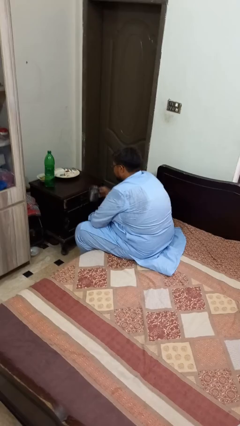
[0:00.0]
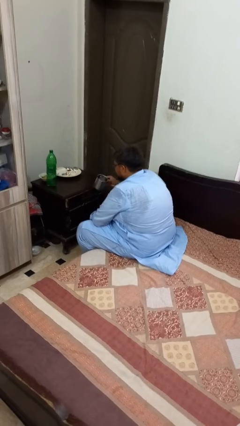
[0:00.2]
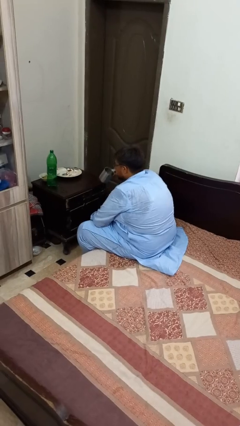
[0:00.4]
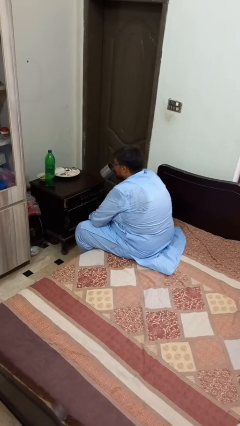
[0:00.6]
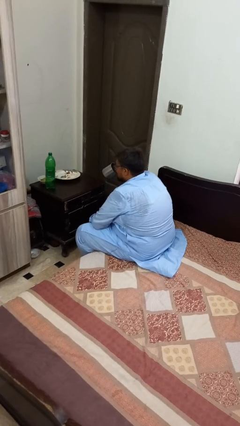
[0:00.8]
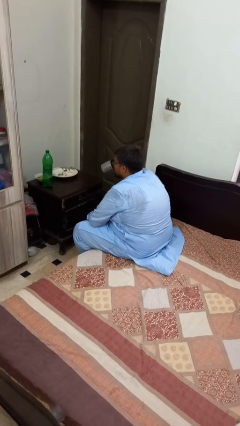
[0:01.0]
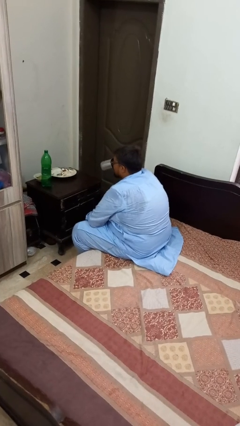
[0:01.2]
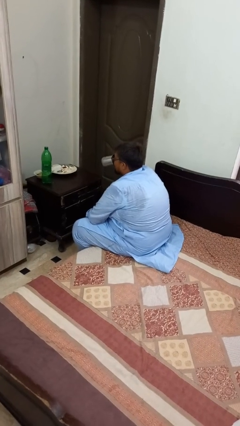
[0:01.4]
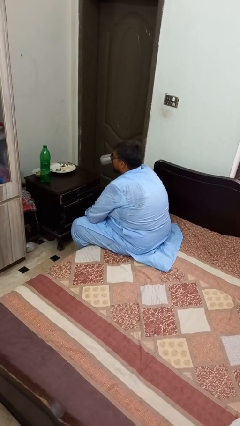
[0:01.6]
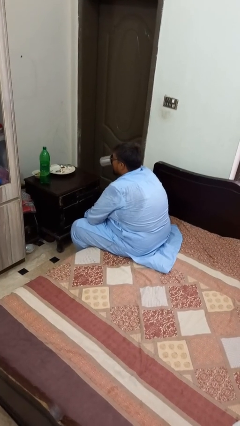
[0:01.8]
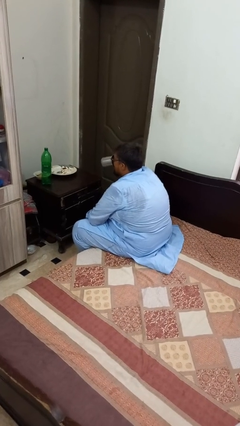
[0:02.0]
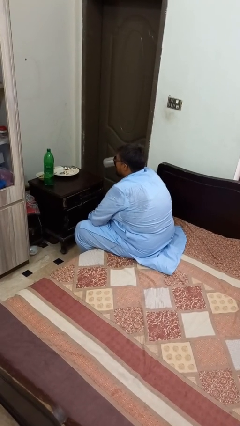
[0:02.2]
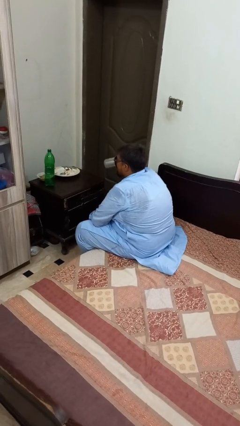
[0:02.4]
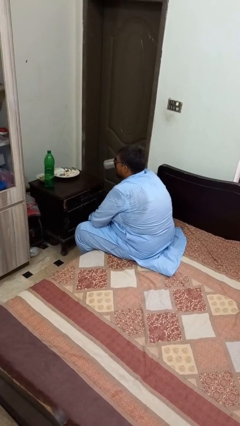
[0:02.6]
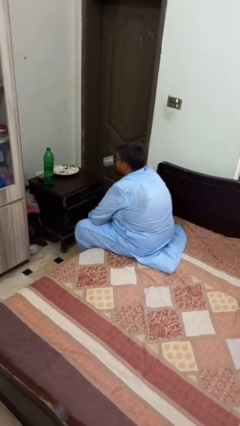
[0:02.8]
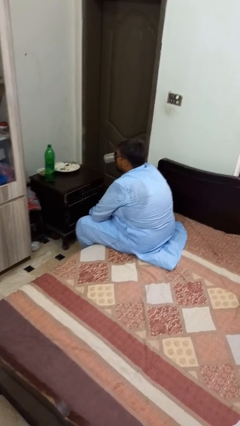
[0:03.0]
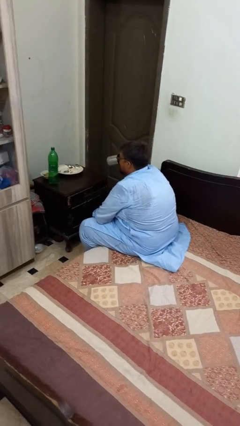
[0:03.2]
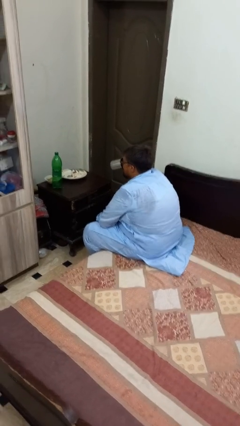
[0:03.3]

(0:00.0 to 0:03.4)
person drinks from mug

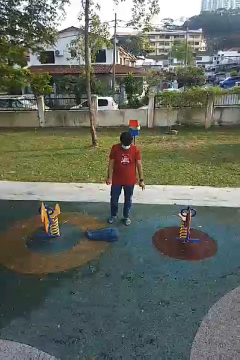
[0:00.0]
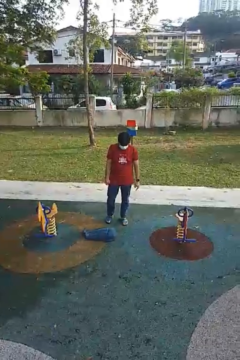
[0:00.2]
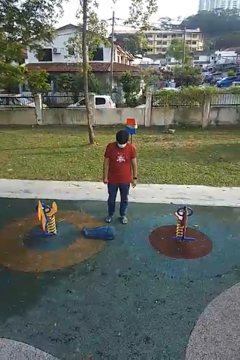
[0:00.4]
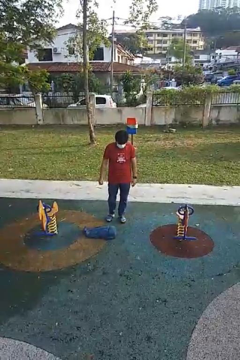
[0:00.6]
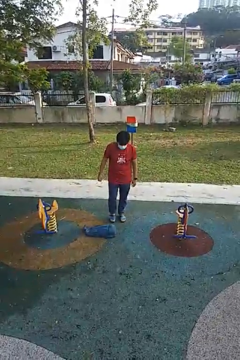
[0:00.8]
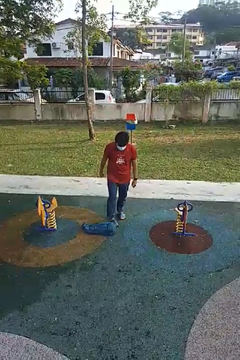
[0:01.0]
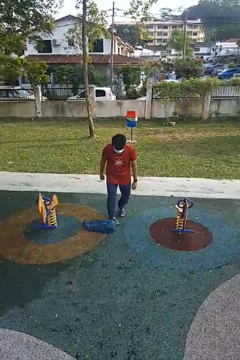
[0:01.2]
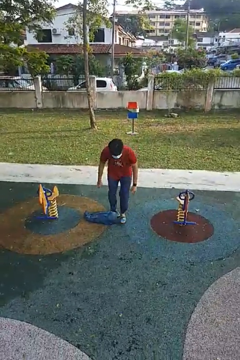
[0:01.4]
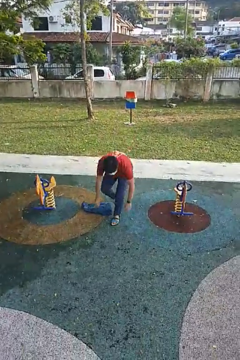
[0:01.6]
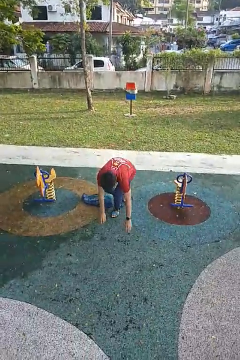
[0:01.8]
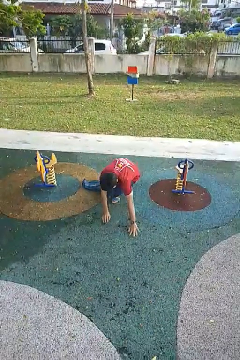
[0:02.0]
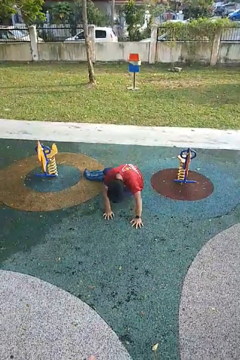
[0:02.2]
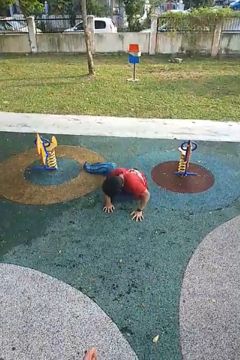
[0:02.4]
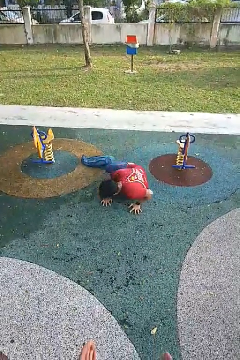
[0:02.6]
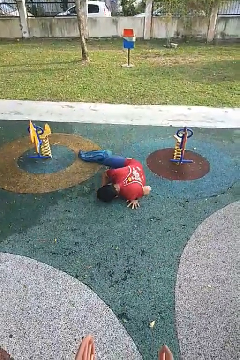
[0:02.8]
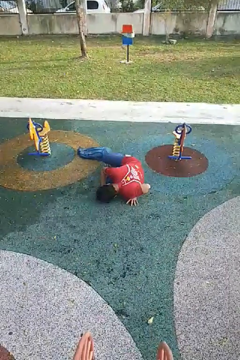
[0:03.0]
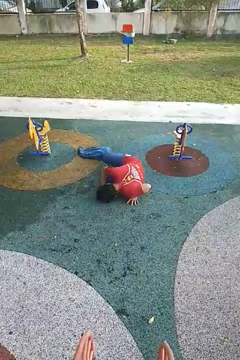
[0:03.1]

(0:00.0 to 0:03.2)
person trips on object on floor

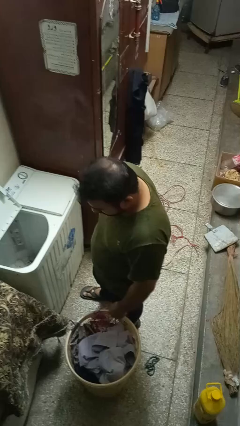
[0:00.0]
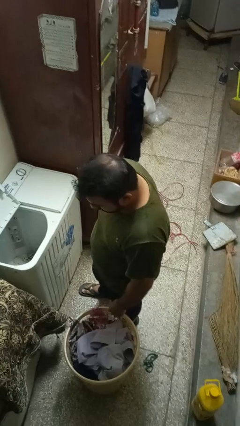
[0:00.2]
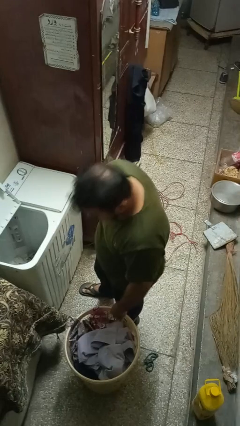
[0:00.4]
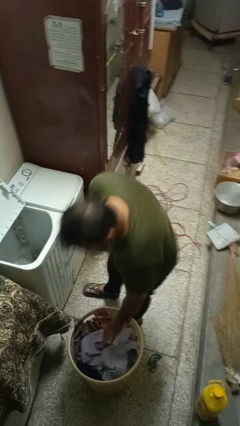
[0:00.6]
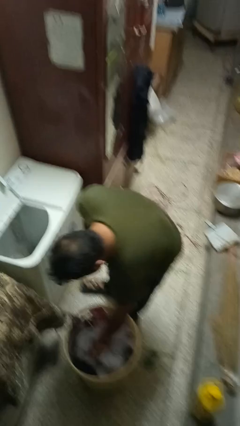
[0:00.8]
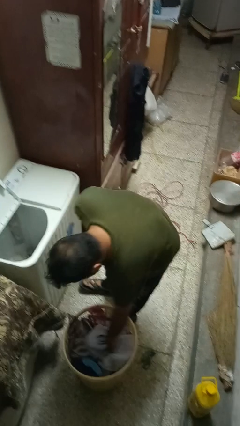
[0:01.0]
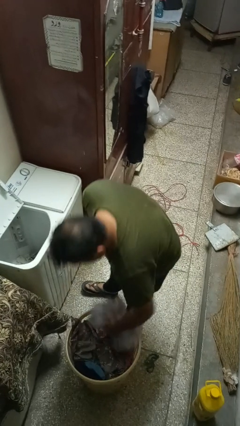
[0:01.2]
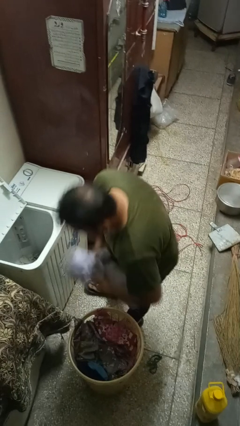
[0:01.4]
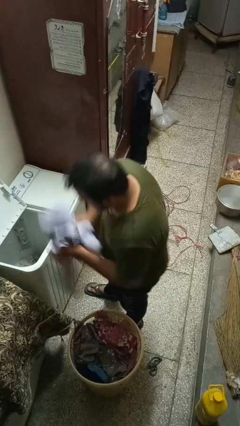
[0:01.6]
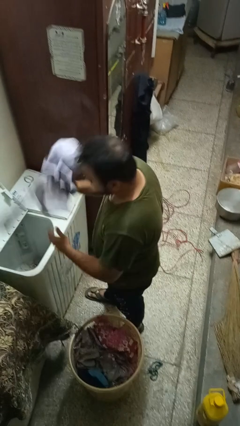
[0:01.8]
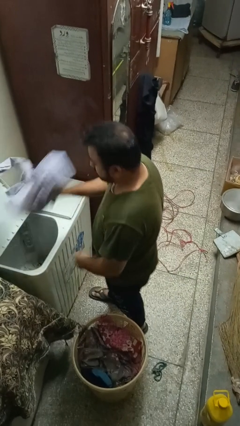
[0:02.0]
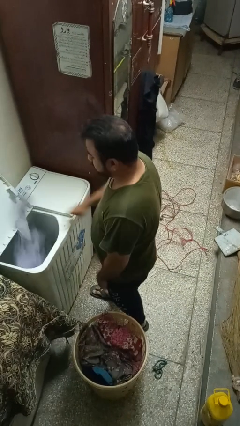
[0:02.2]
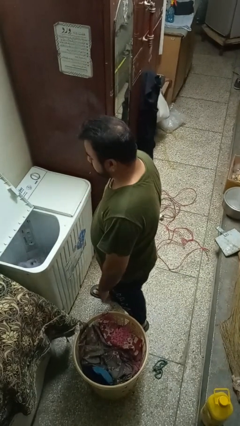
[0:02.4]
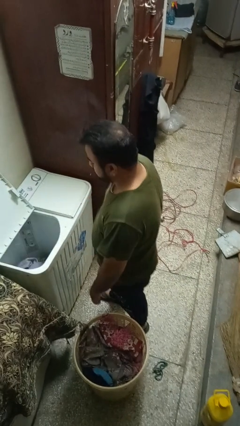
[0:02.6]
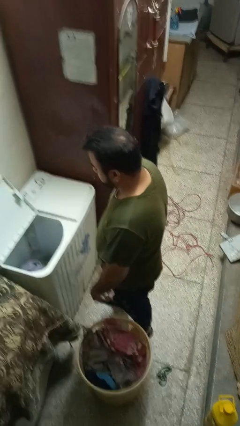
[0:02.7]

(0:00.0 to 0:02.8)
person loads clotheswasher

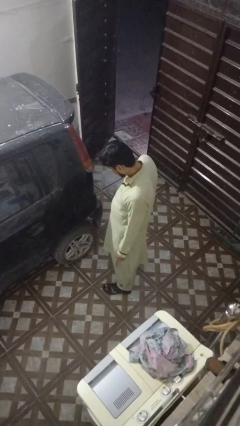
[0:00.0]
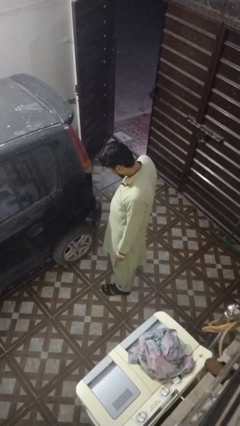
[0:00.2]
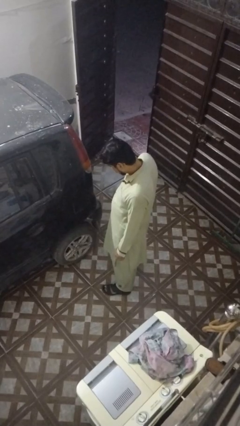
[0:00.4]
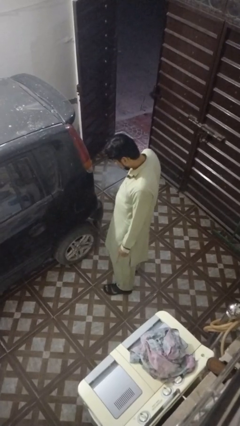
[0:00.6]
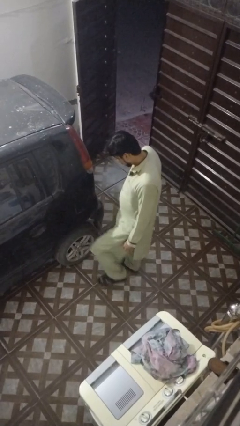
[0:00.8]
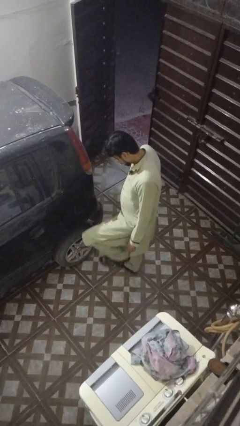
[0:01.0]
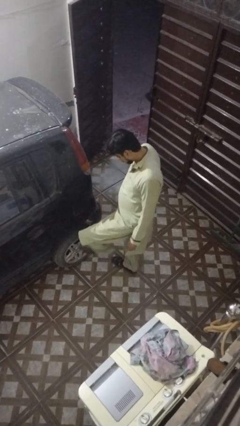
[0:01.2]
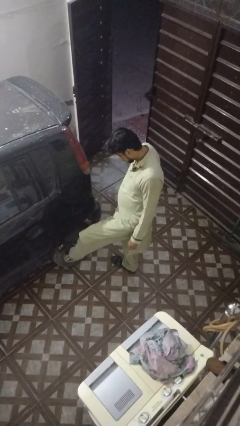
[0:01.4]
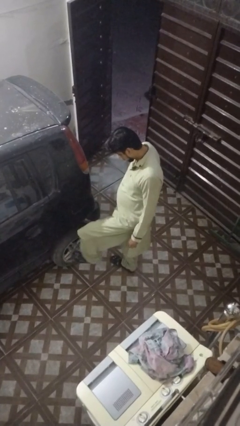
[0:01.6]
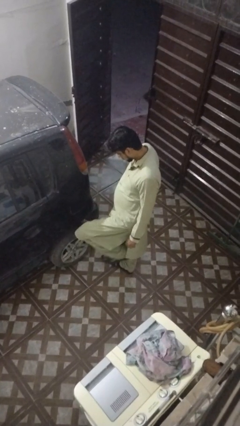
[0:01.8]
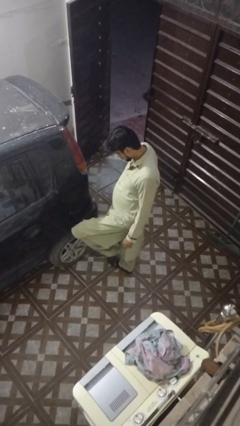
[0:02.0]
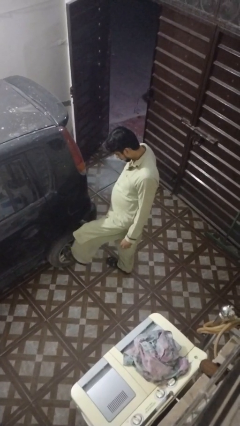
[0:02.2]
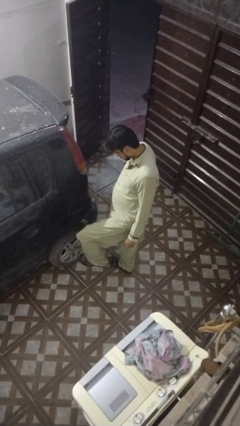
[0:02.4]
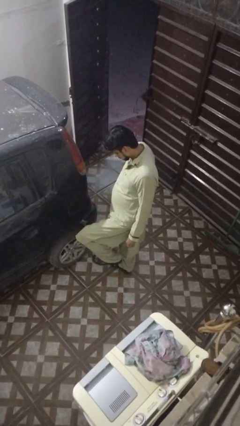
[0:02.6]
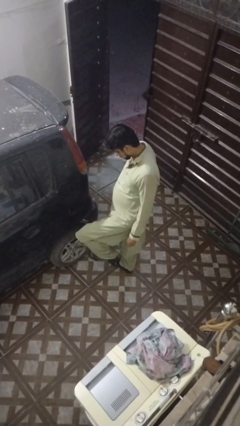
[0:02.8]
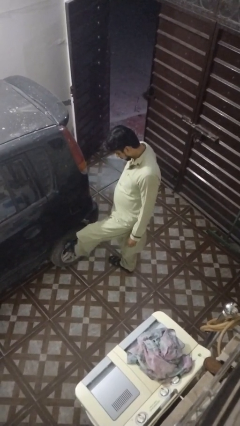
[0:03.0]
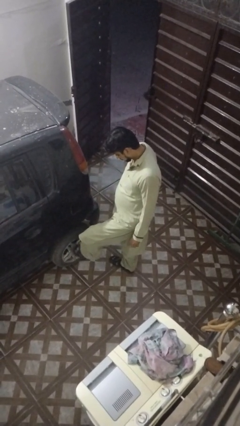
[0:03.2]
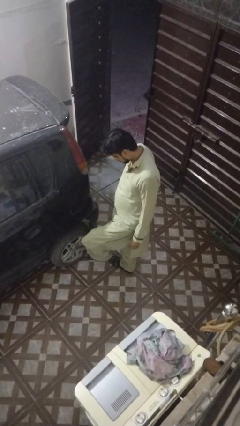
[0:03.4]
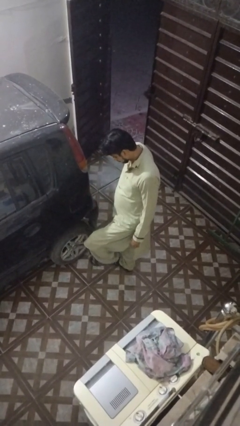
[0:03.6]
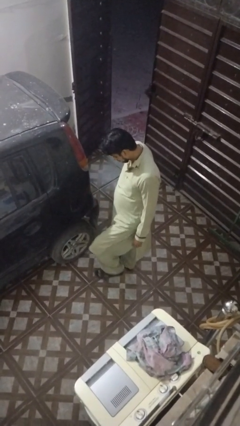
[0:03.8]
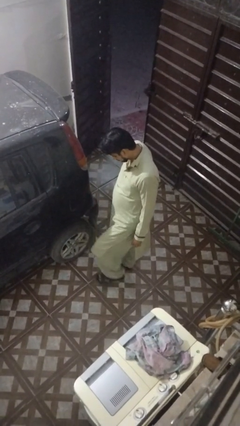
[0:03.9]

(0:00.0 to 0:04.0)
person kicks car tires

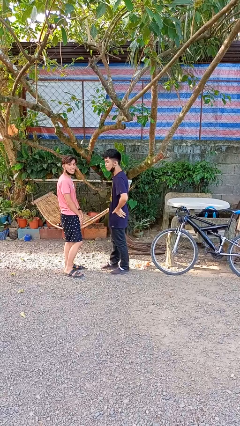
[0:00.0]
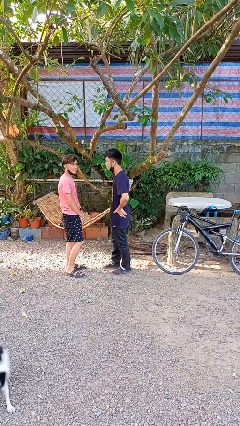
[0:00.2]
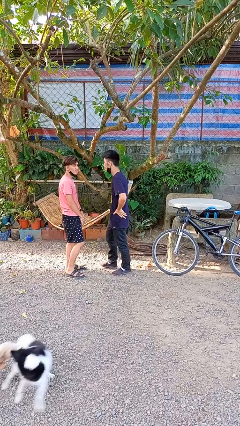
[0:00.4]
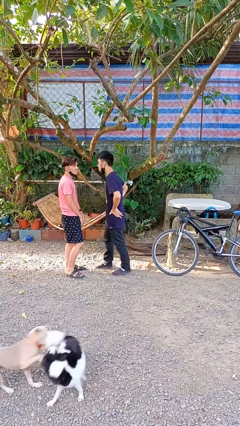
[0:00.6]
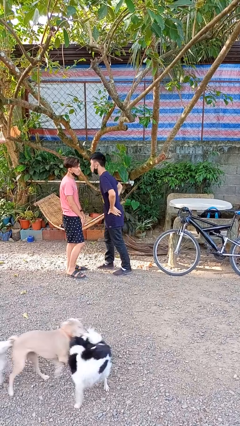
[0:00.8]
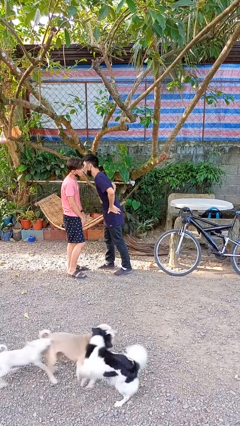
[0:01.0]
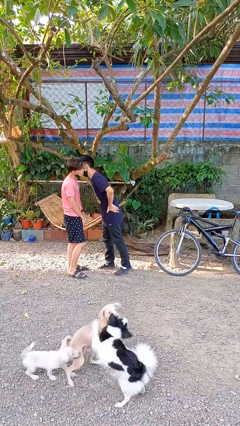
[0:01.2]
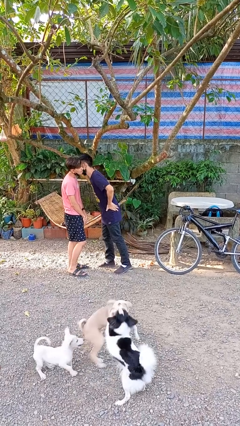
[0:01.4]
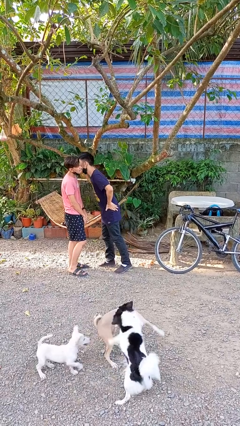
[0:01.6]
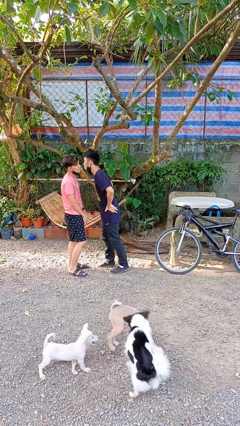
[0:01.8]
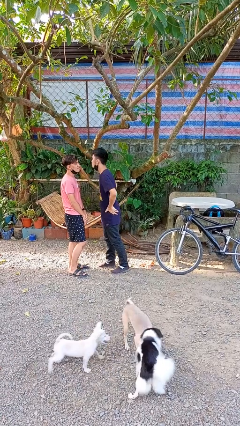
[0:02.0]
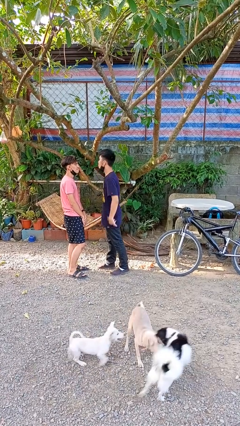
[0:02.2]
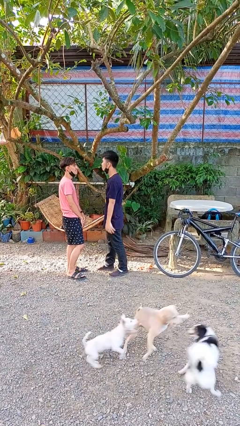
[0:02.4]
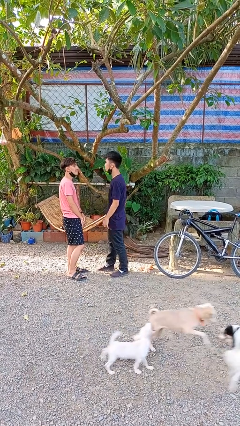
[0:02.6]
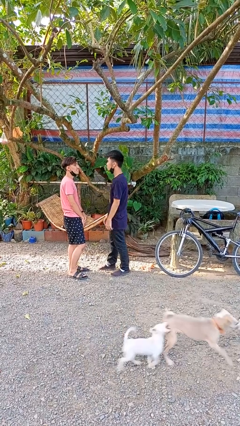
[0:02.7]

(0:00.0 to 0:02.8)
person kisses cheek of person

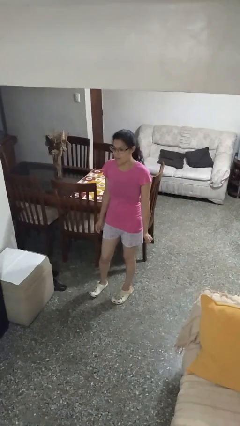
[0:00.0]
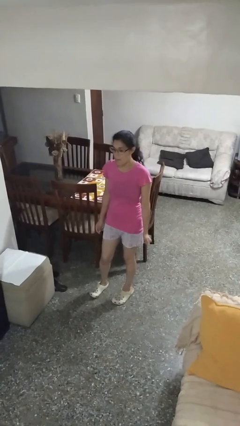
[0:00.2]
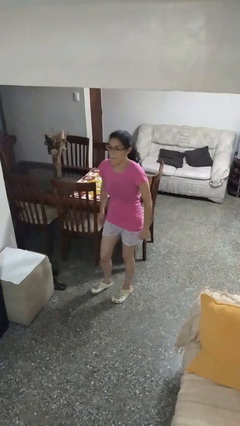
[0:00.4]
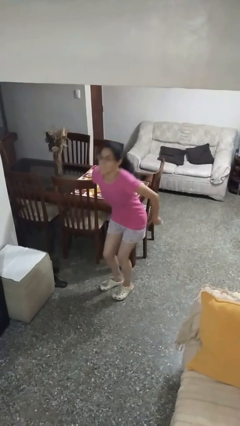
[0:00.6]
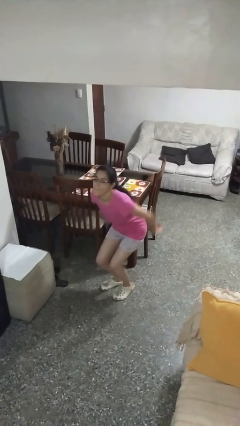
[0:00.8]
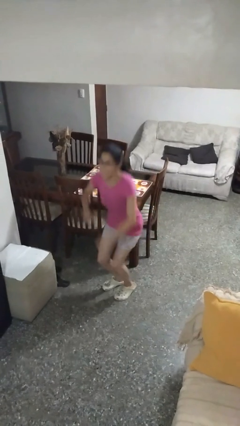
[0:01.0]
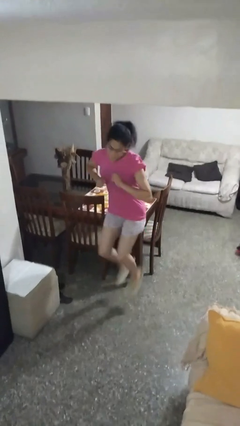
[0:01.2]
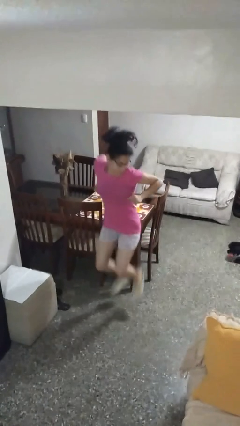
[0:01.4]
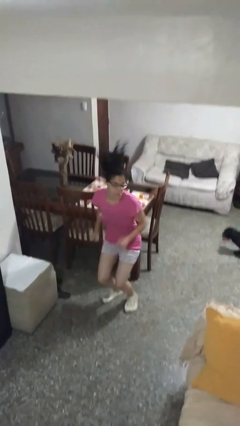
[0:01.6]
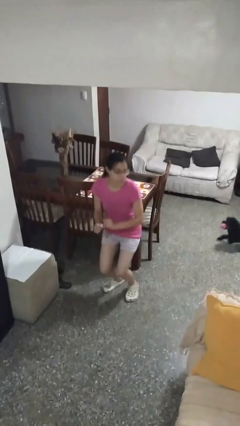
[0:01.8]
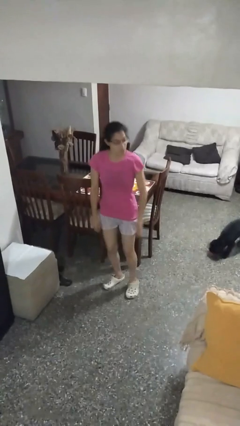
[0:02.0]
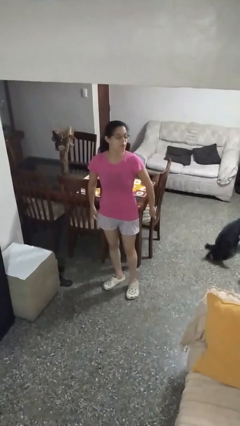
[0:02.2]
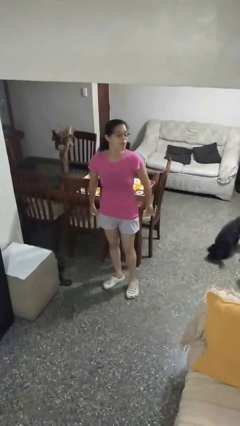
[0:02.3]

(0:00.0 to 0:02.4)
person jumps
